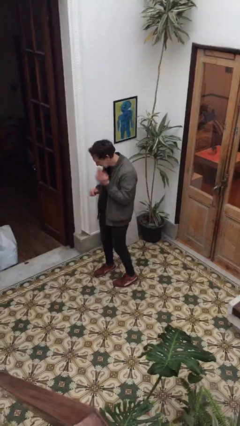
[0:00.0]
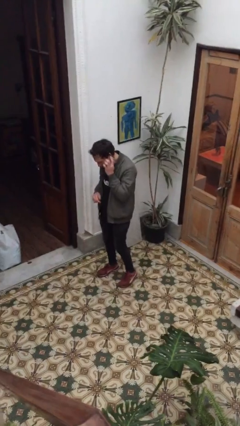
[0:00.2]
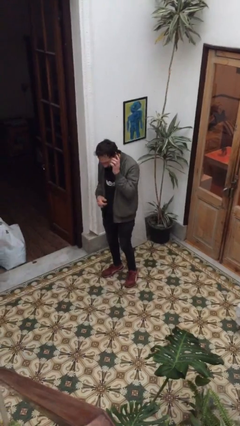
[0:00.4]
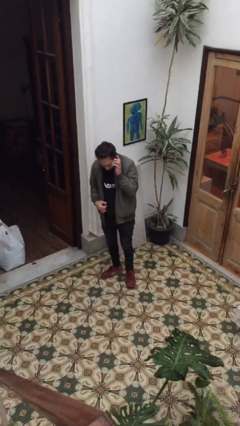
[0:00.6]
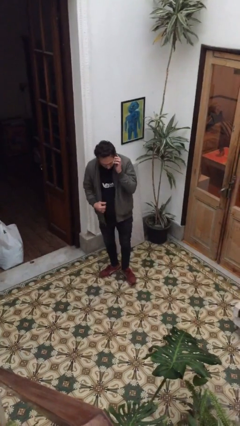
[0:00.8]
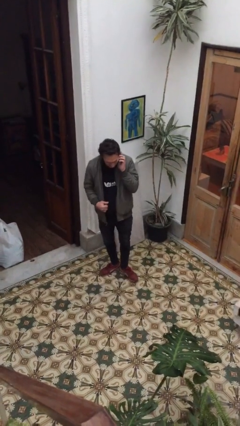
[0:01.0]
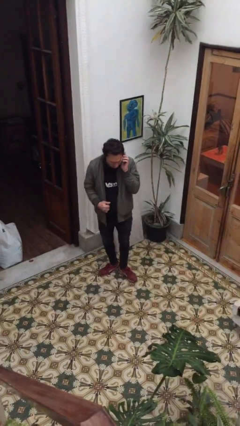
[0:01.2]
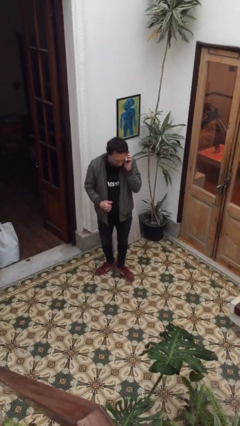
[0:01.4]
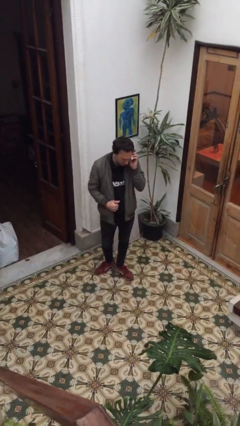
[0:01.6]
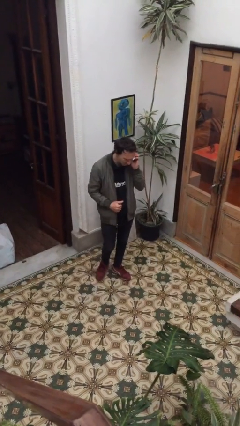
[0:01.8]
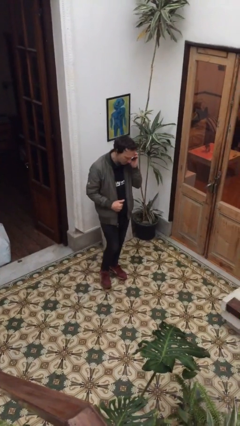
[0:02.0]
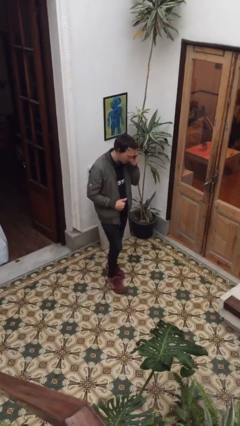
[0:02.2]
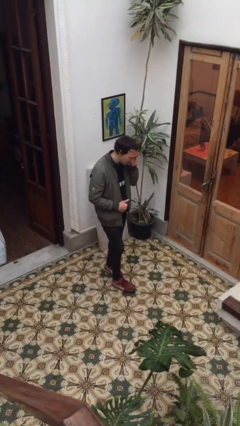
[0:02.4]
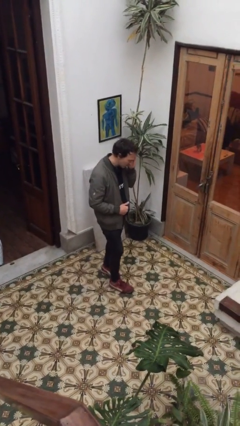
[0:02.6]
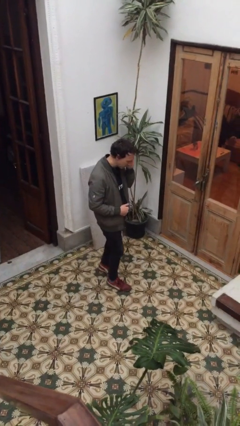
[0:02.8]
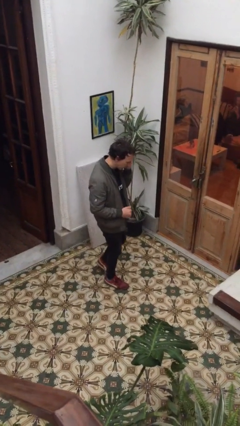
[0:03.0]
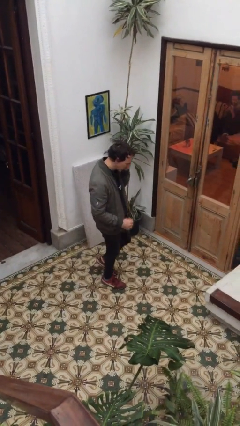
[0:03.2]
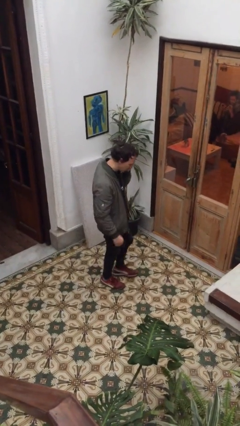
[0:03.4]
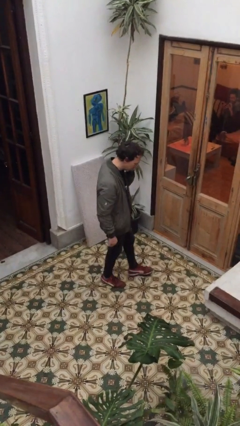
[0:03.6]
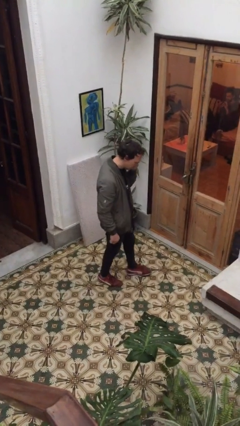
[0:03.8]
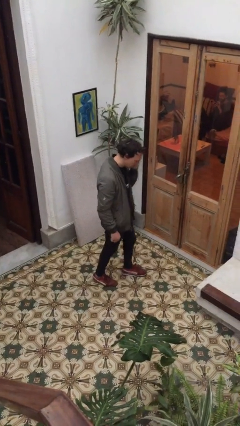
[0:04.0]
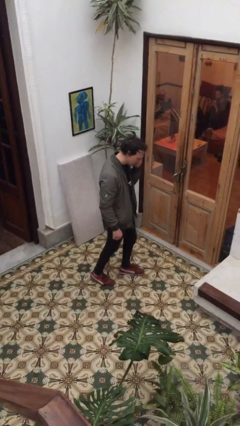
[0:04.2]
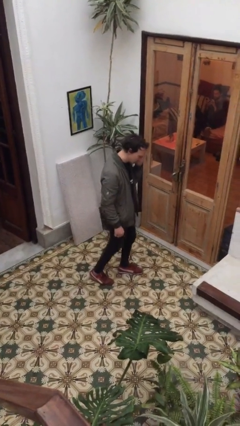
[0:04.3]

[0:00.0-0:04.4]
person talks on phone

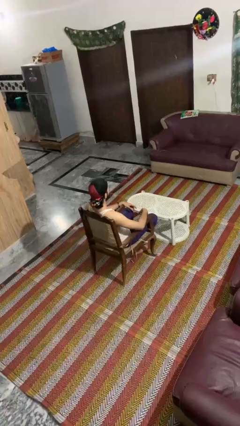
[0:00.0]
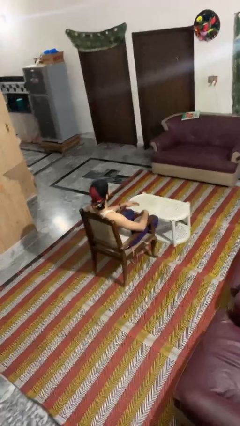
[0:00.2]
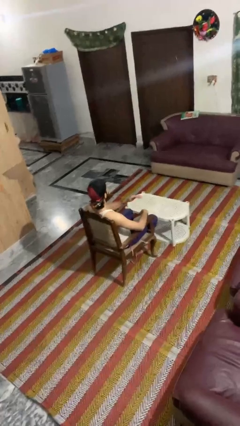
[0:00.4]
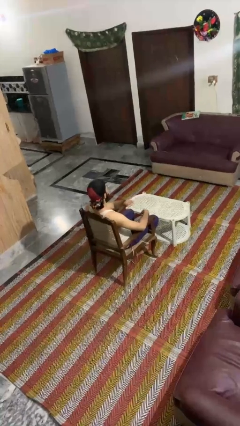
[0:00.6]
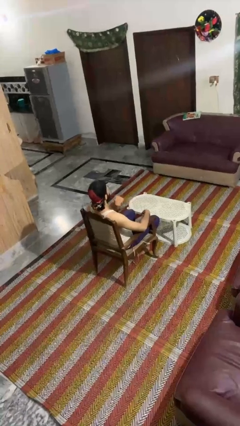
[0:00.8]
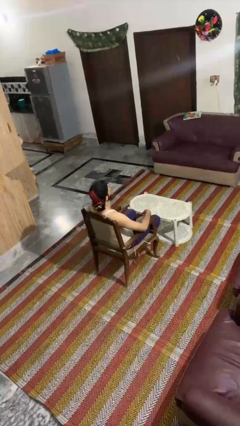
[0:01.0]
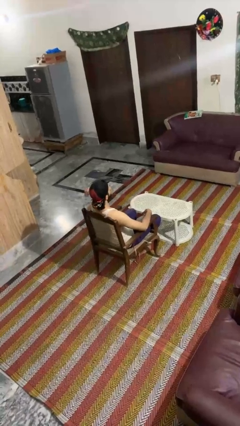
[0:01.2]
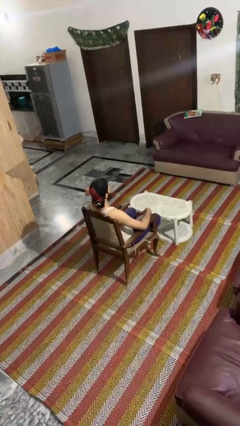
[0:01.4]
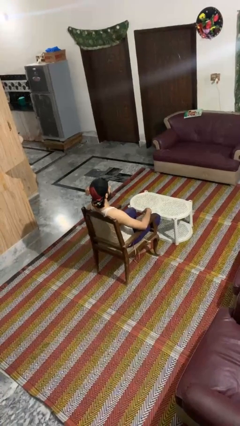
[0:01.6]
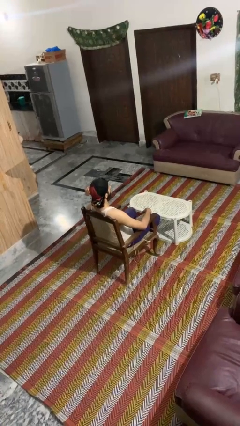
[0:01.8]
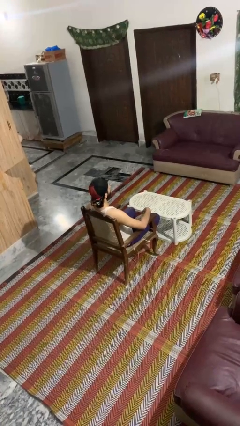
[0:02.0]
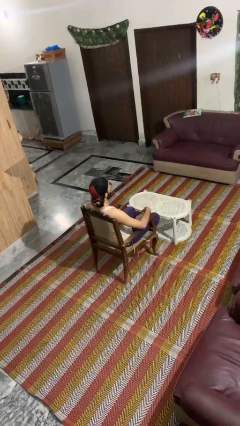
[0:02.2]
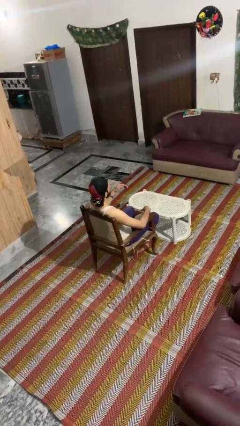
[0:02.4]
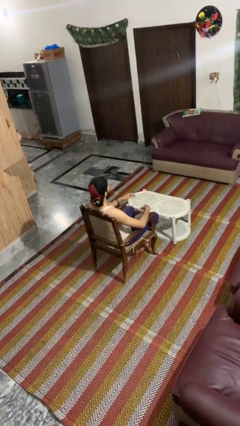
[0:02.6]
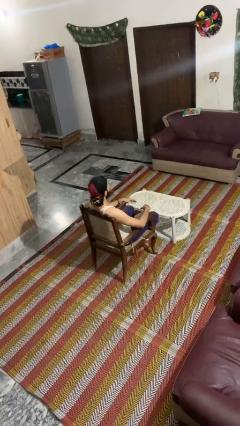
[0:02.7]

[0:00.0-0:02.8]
person gestures cut

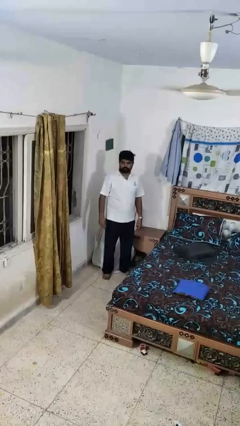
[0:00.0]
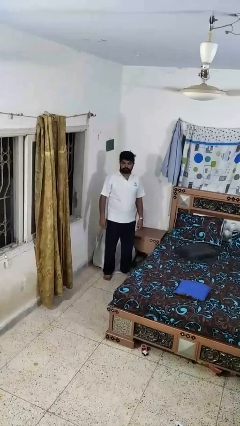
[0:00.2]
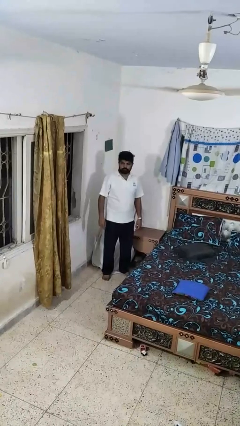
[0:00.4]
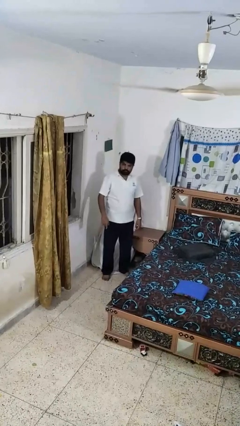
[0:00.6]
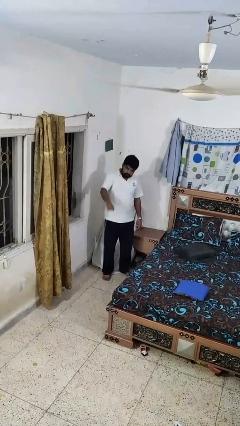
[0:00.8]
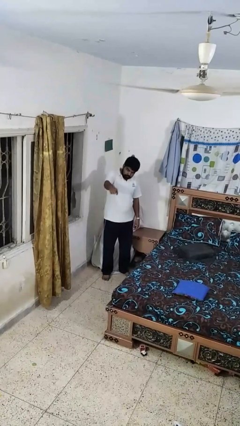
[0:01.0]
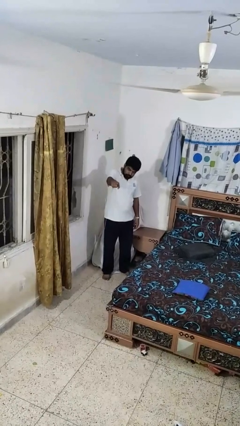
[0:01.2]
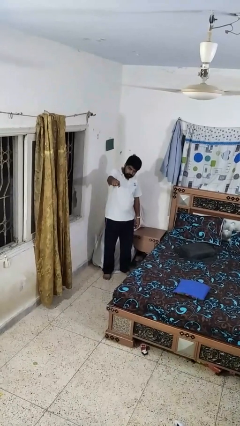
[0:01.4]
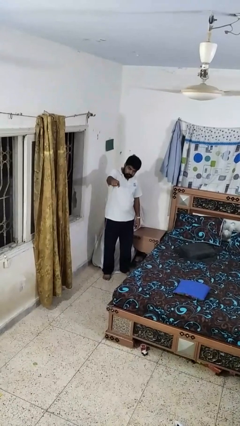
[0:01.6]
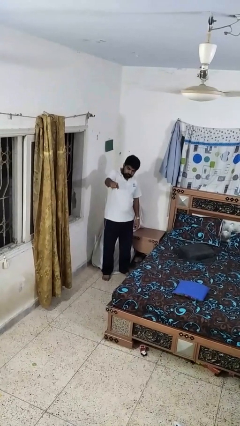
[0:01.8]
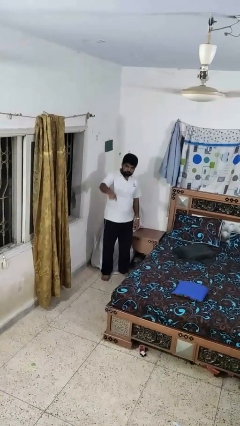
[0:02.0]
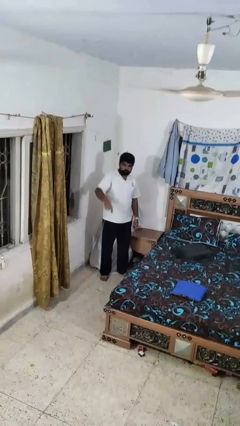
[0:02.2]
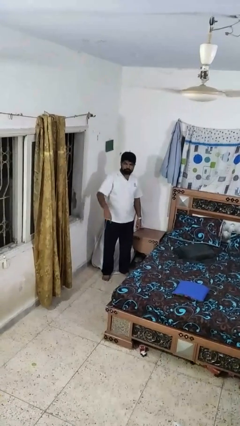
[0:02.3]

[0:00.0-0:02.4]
person points at person

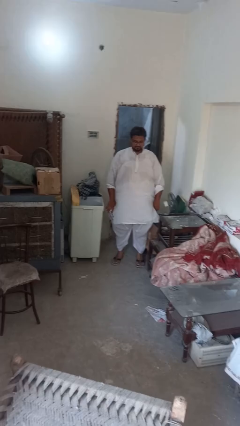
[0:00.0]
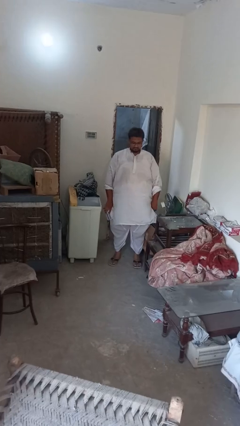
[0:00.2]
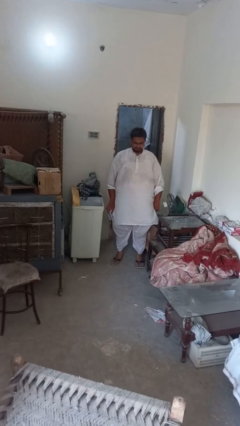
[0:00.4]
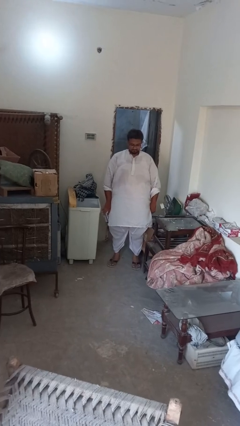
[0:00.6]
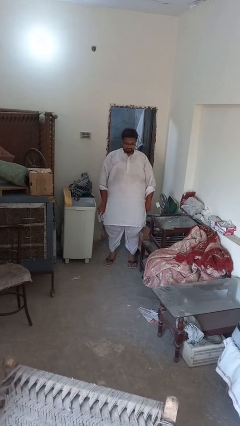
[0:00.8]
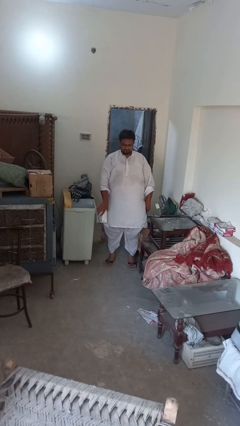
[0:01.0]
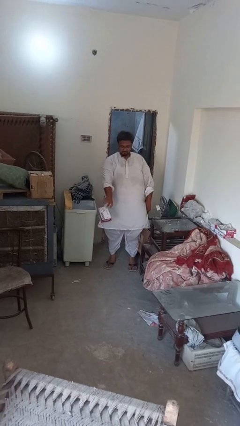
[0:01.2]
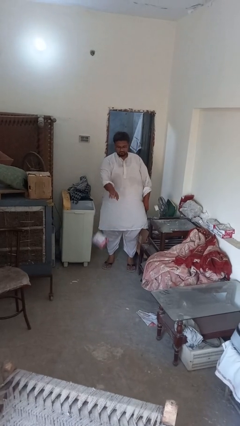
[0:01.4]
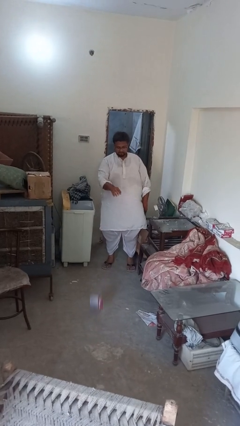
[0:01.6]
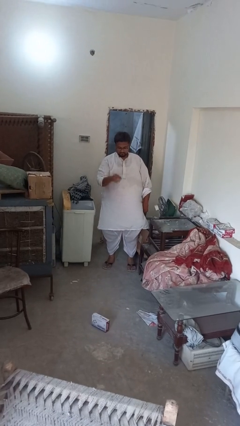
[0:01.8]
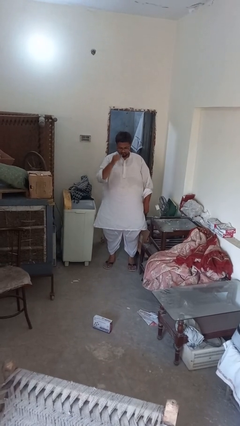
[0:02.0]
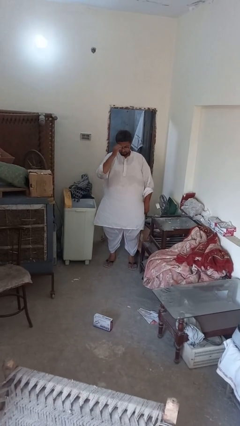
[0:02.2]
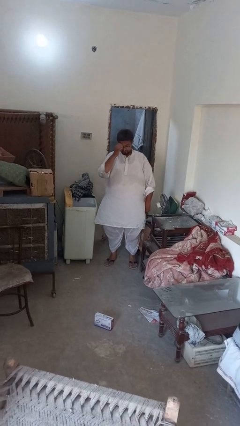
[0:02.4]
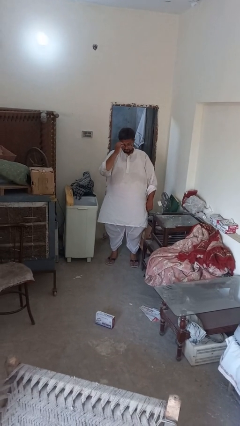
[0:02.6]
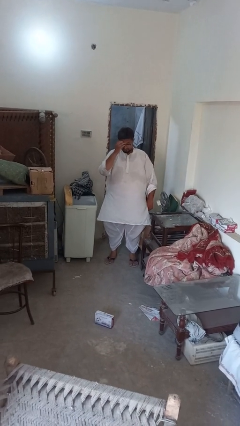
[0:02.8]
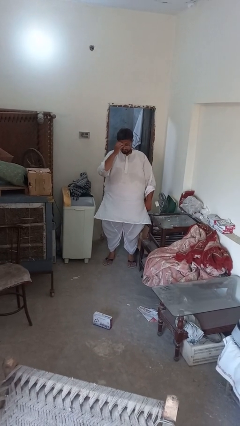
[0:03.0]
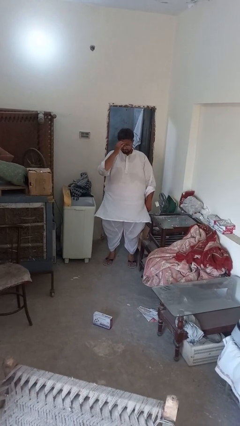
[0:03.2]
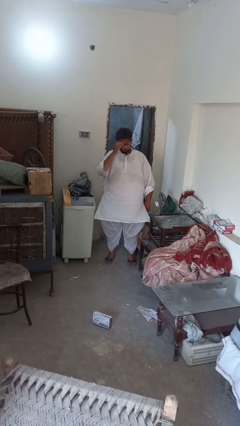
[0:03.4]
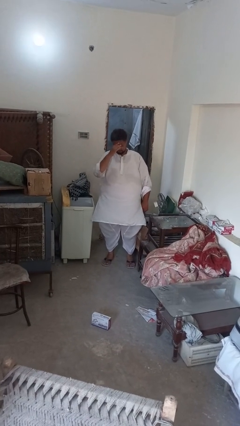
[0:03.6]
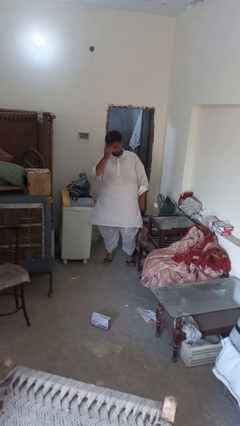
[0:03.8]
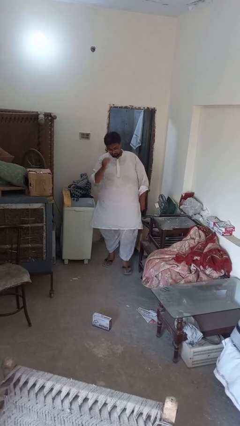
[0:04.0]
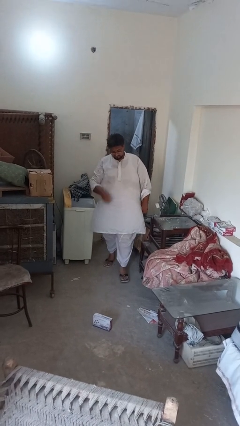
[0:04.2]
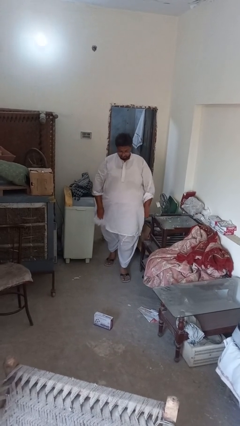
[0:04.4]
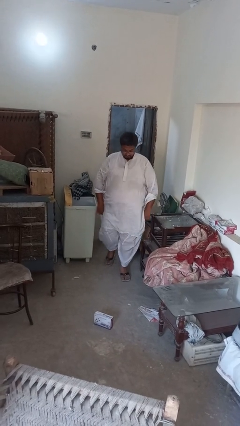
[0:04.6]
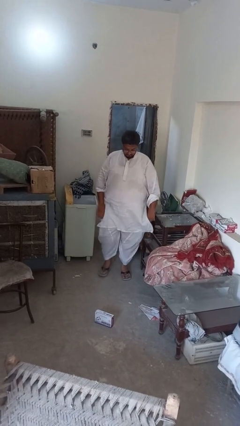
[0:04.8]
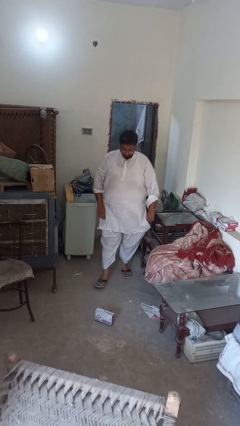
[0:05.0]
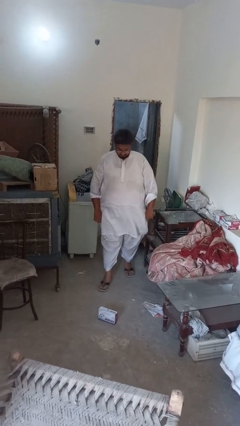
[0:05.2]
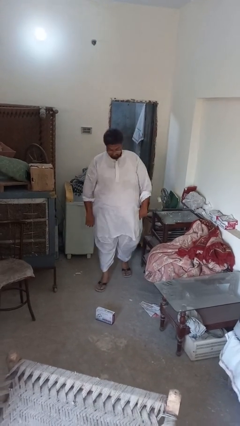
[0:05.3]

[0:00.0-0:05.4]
person throws object to ground

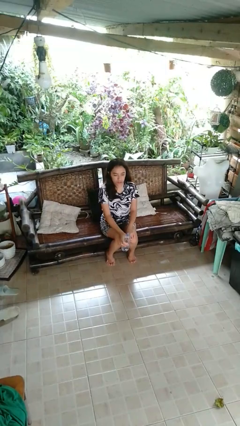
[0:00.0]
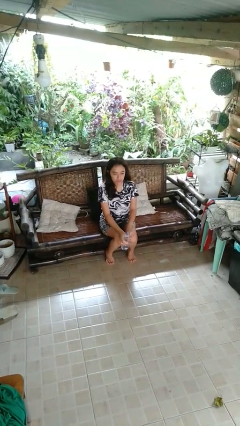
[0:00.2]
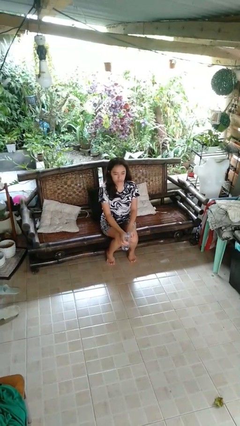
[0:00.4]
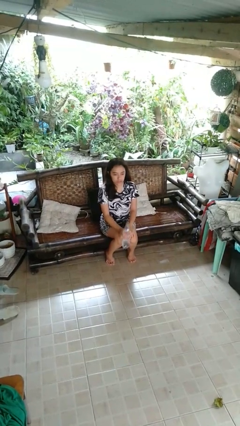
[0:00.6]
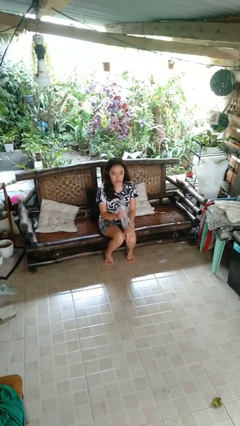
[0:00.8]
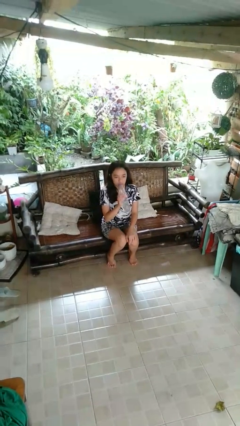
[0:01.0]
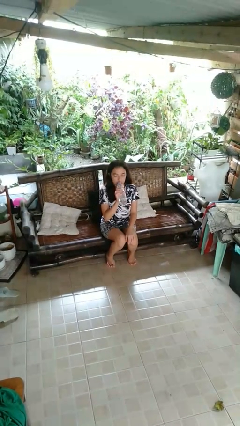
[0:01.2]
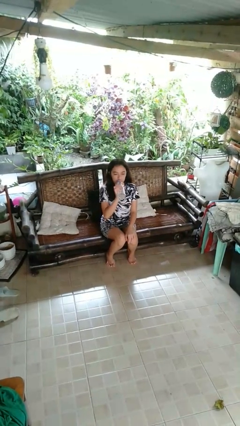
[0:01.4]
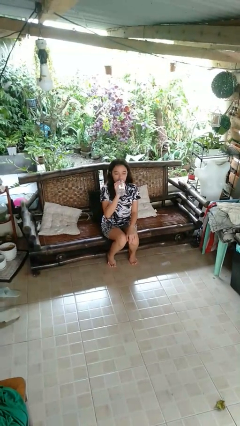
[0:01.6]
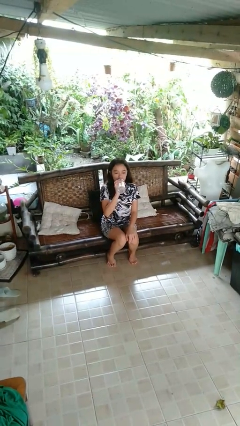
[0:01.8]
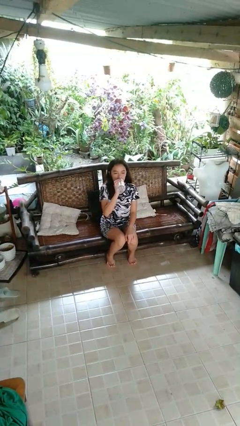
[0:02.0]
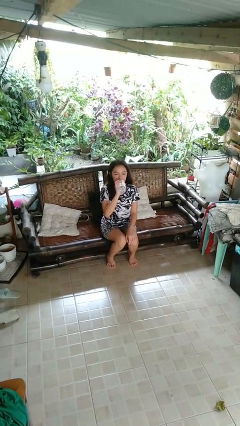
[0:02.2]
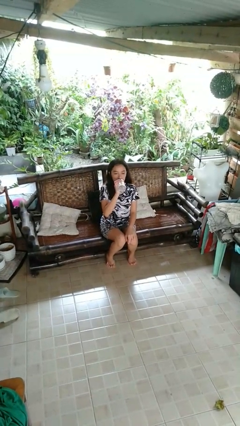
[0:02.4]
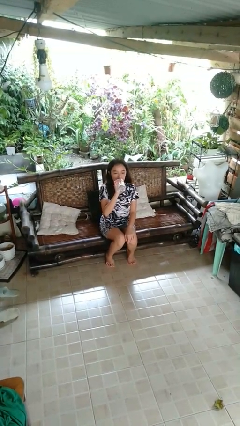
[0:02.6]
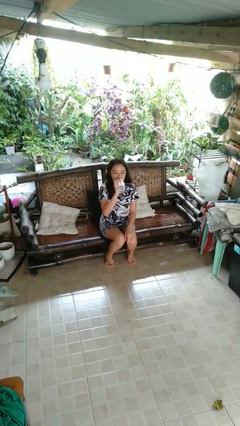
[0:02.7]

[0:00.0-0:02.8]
person drinks from bottle
